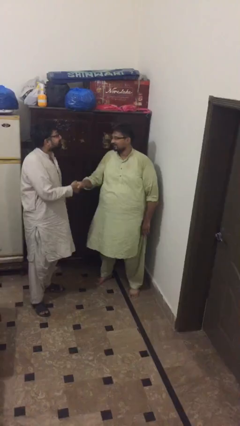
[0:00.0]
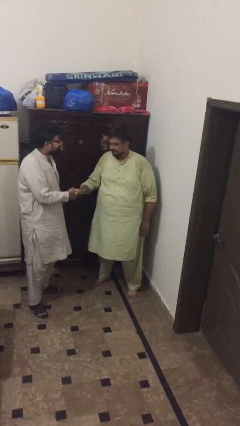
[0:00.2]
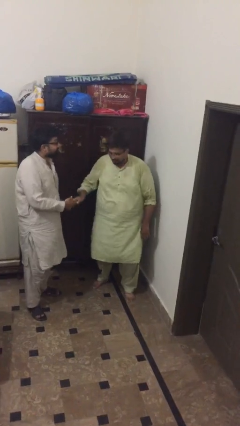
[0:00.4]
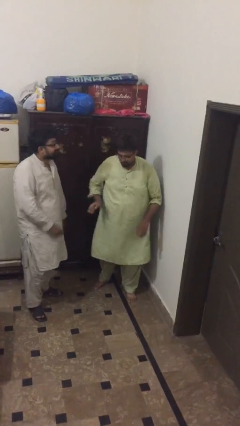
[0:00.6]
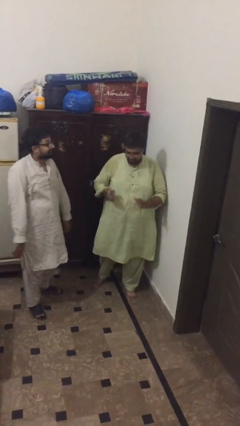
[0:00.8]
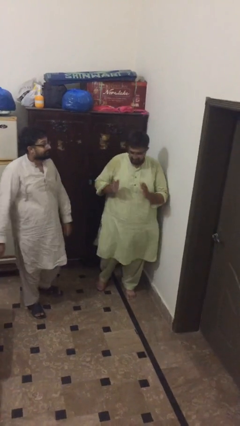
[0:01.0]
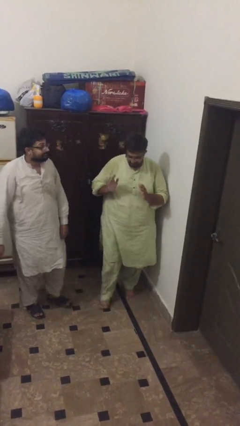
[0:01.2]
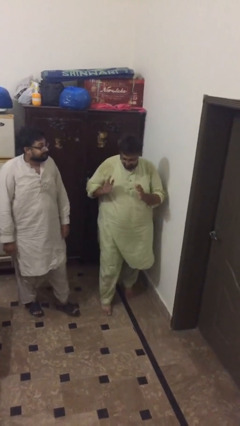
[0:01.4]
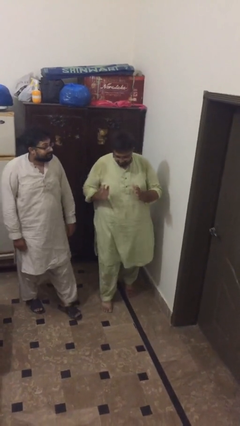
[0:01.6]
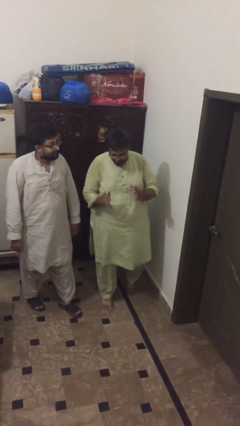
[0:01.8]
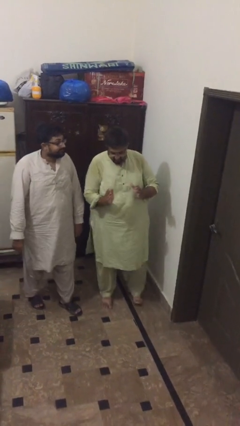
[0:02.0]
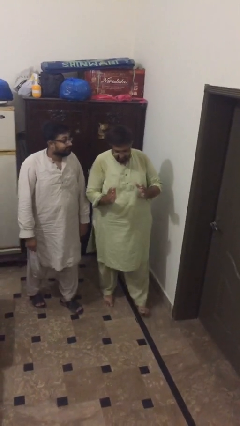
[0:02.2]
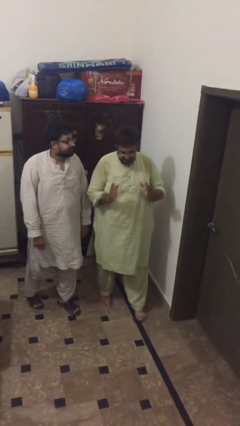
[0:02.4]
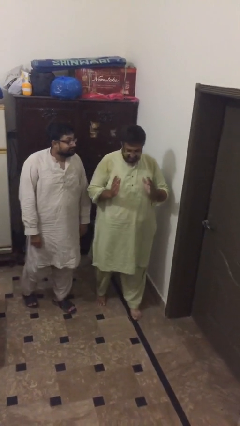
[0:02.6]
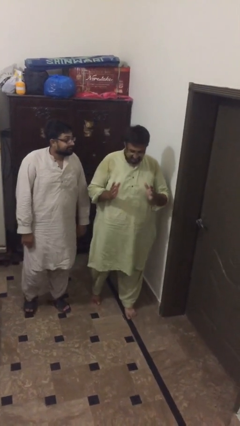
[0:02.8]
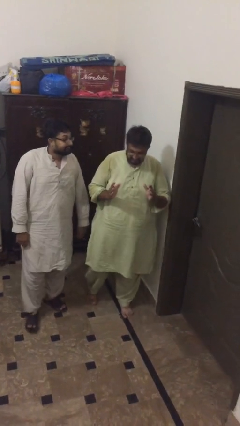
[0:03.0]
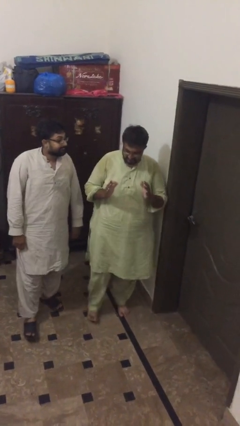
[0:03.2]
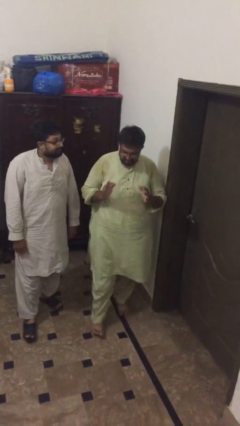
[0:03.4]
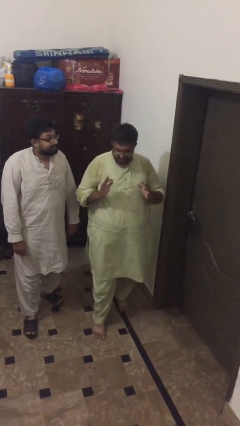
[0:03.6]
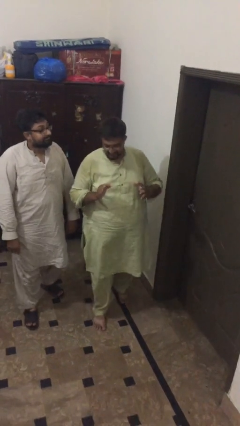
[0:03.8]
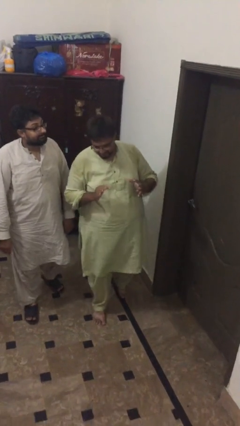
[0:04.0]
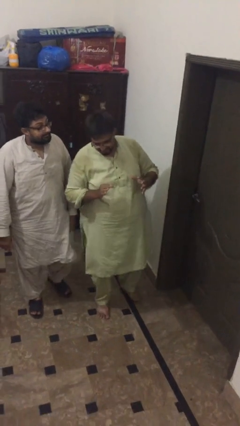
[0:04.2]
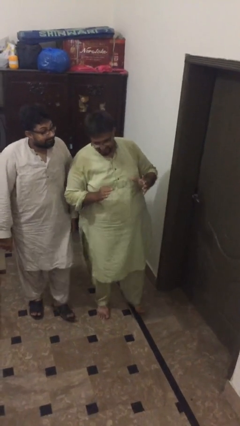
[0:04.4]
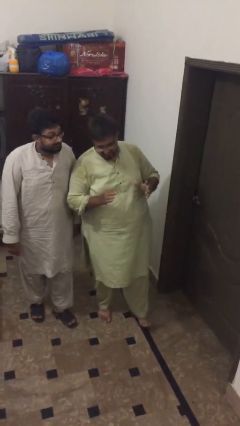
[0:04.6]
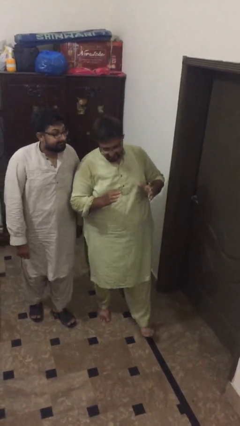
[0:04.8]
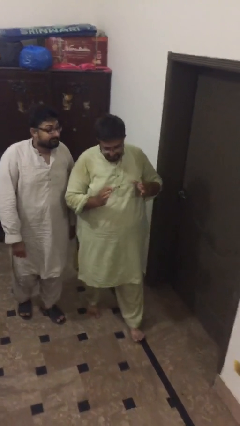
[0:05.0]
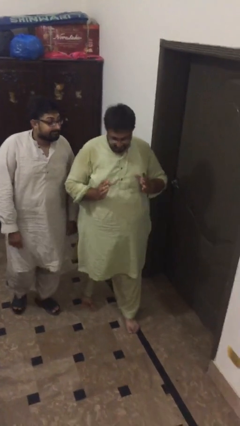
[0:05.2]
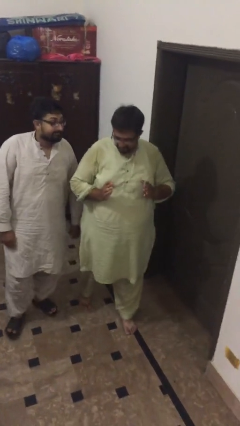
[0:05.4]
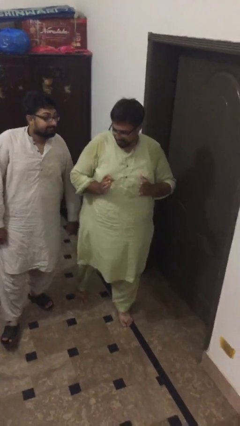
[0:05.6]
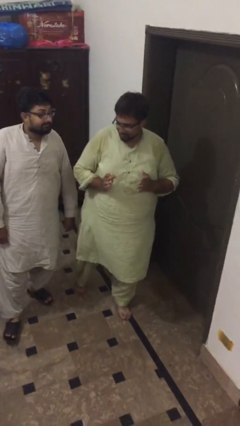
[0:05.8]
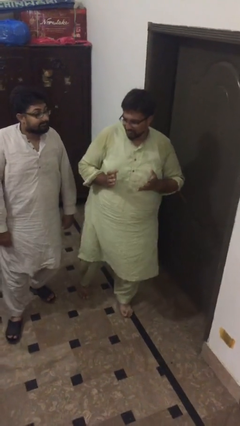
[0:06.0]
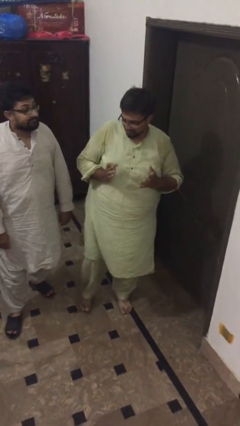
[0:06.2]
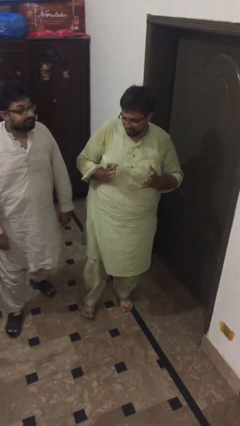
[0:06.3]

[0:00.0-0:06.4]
person talks to person

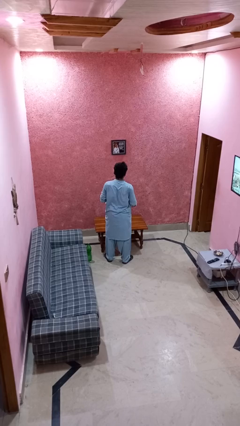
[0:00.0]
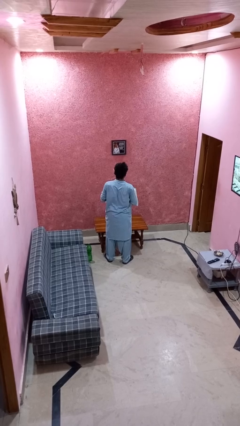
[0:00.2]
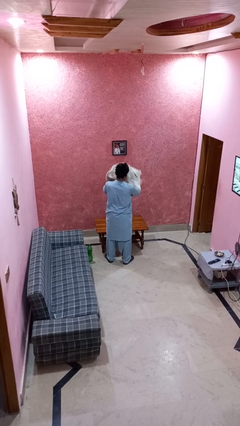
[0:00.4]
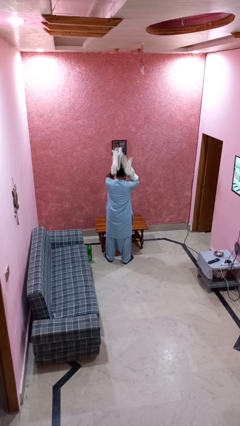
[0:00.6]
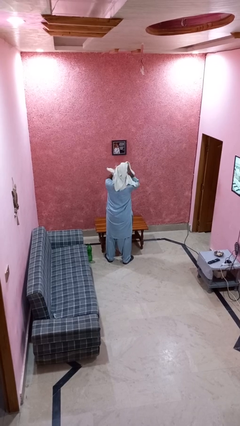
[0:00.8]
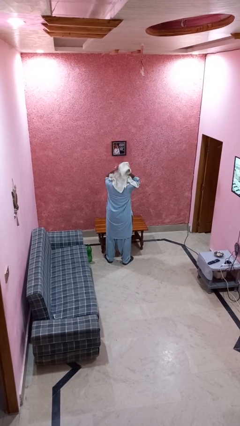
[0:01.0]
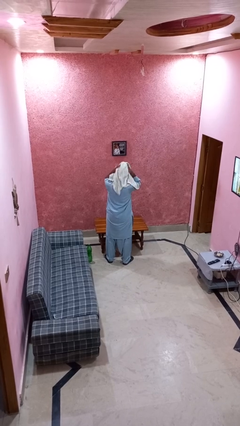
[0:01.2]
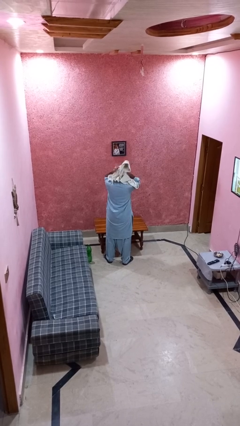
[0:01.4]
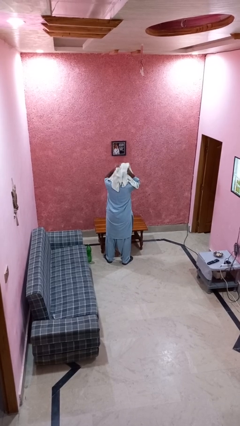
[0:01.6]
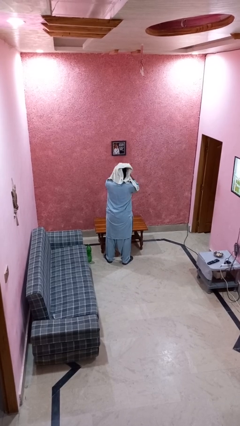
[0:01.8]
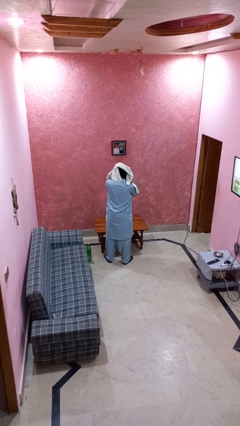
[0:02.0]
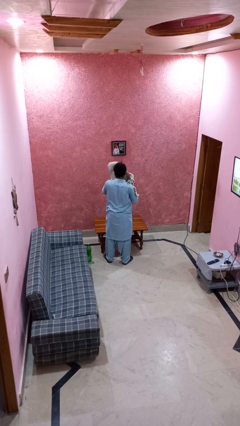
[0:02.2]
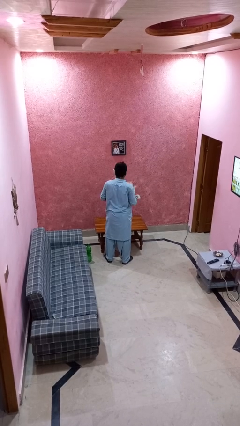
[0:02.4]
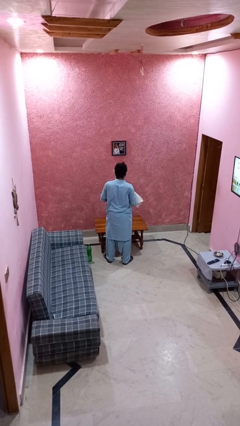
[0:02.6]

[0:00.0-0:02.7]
person dries hair with towel

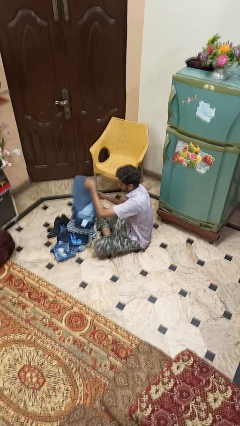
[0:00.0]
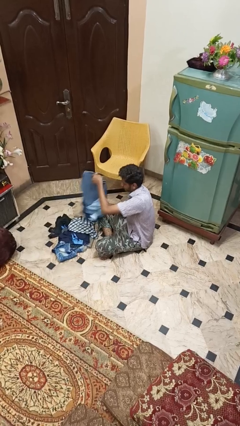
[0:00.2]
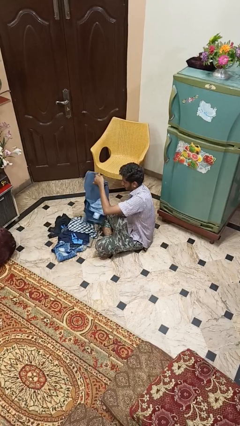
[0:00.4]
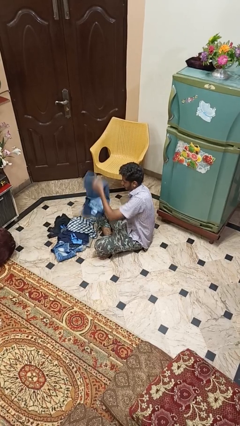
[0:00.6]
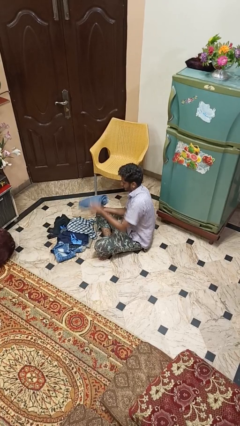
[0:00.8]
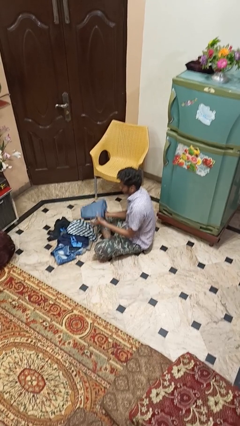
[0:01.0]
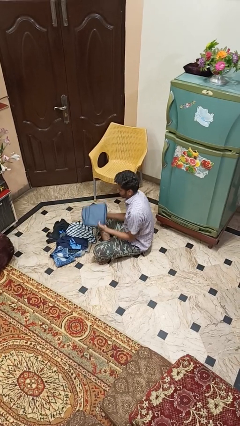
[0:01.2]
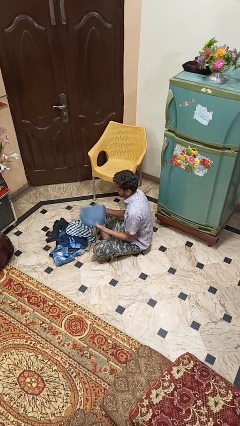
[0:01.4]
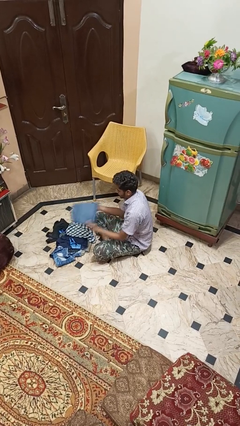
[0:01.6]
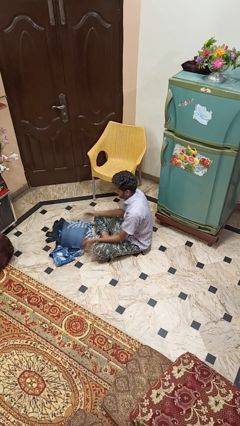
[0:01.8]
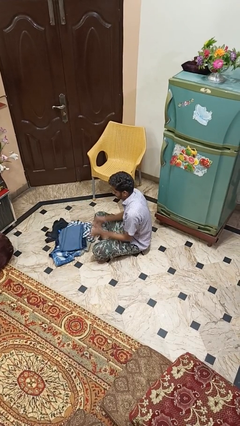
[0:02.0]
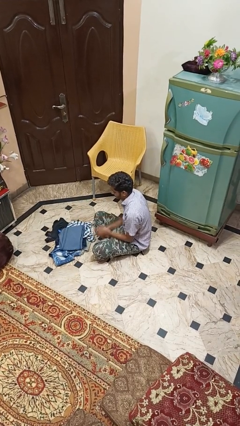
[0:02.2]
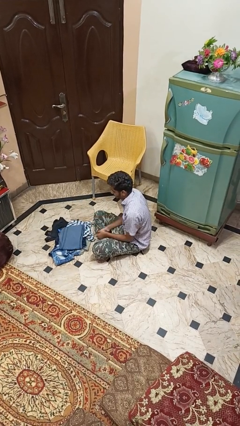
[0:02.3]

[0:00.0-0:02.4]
person folds pants

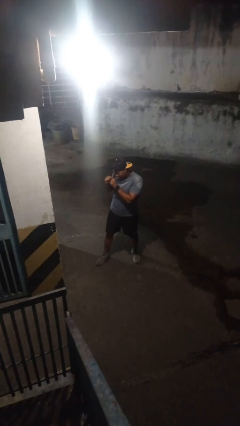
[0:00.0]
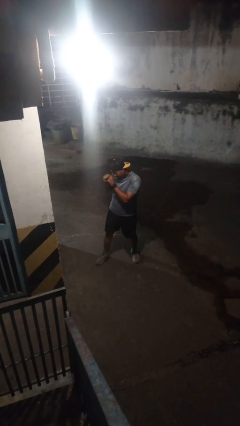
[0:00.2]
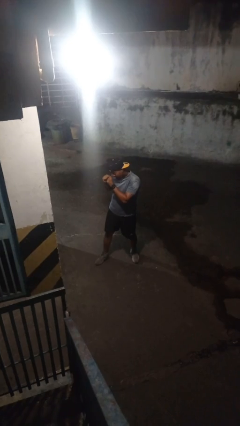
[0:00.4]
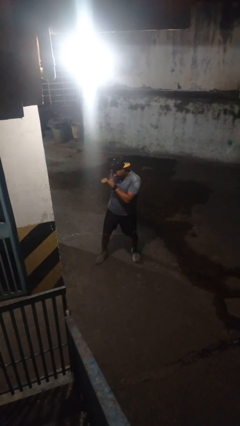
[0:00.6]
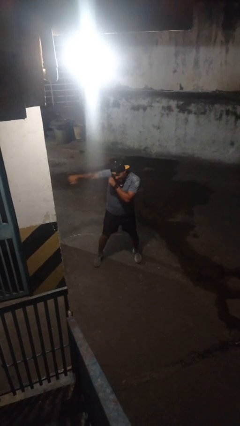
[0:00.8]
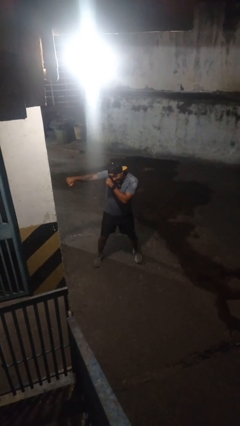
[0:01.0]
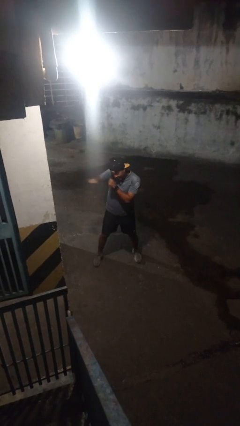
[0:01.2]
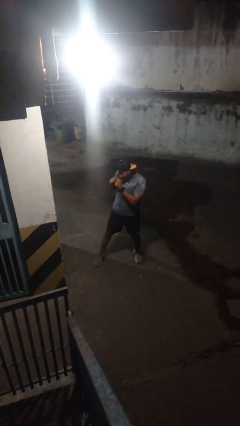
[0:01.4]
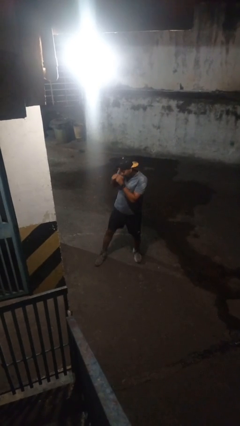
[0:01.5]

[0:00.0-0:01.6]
person punches

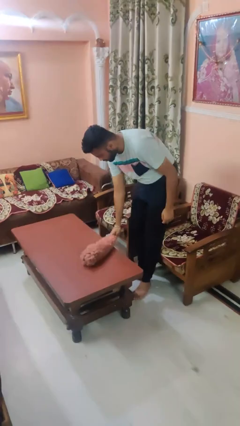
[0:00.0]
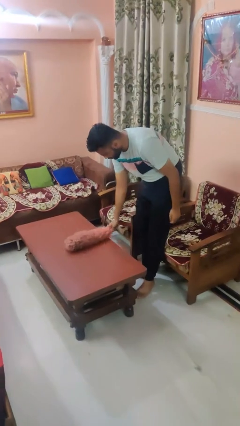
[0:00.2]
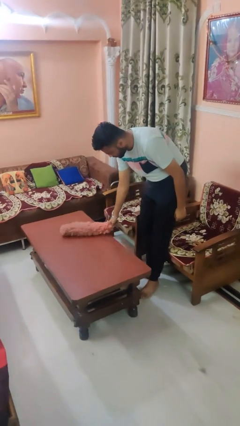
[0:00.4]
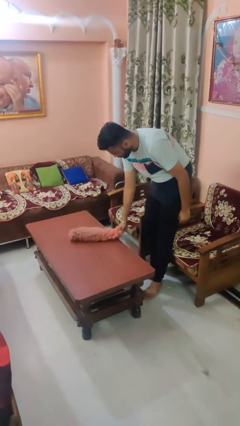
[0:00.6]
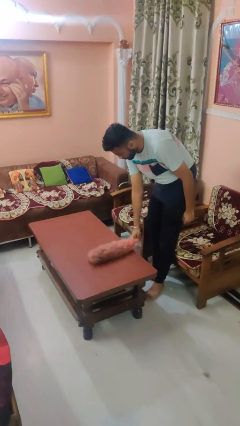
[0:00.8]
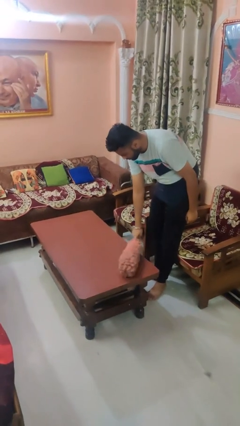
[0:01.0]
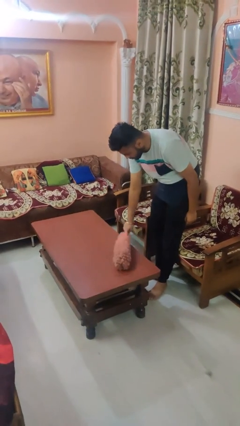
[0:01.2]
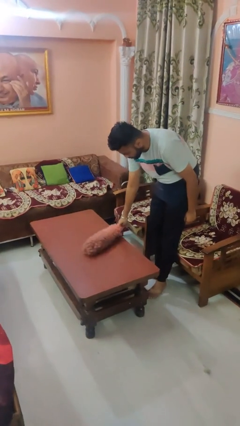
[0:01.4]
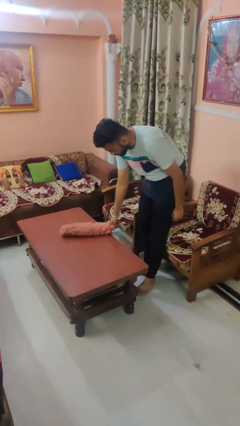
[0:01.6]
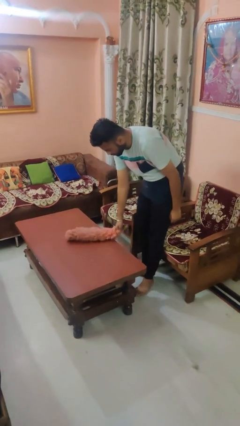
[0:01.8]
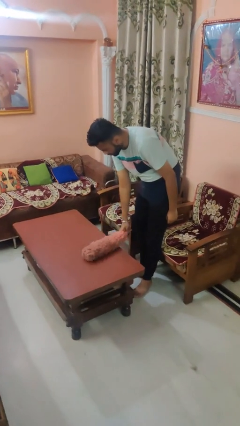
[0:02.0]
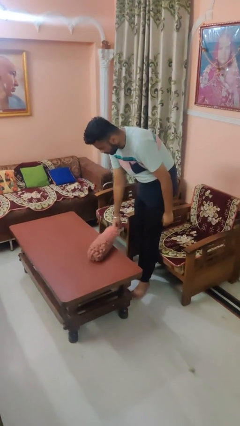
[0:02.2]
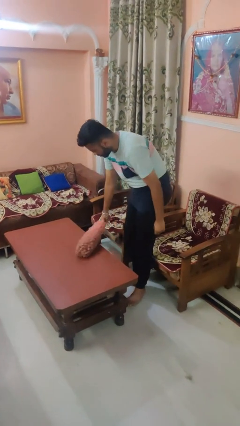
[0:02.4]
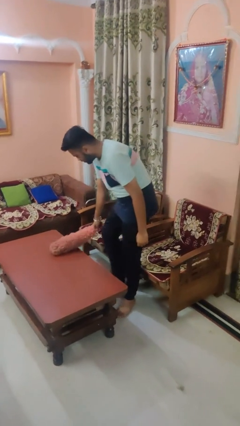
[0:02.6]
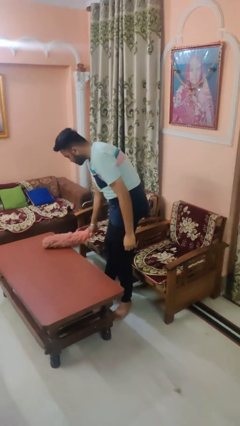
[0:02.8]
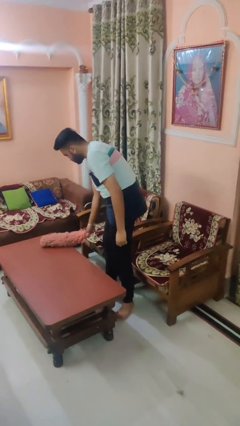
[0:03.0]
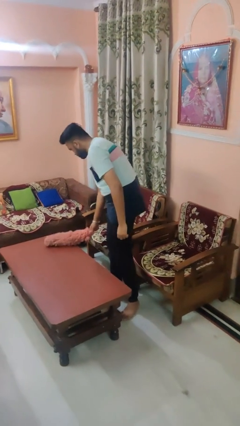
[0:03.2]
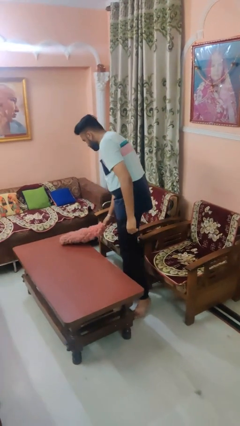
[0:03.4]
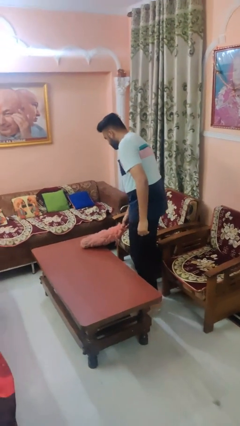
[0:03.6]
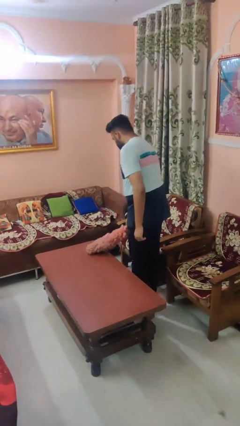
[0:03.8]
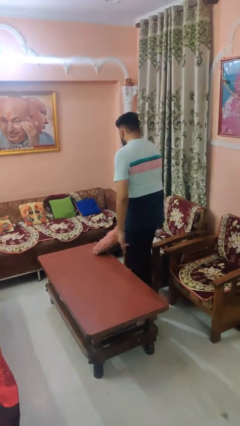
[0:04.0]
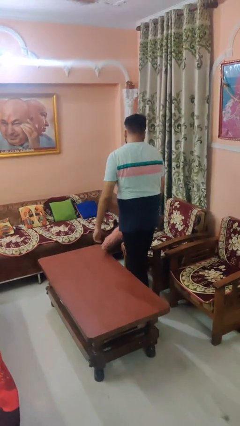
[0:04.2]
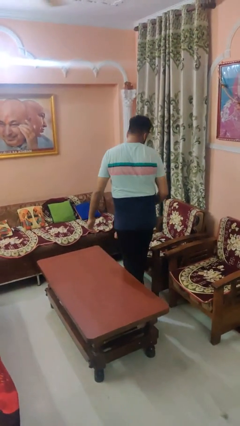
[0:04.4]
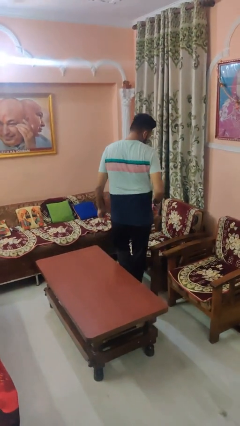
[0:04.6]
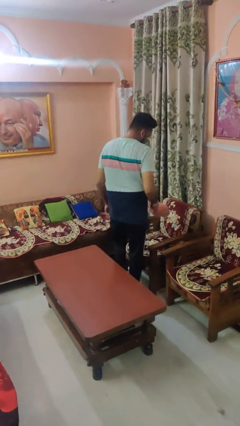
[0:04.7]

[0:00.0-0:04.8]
person dusts furniture
